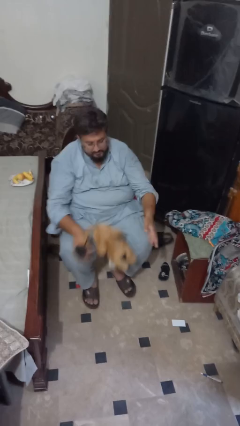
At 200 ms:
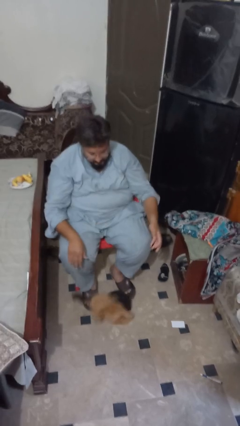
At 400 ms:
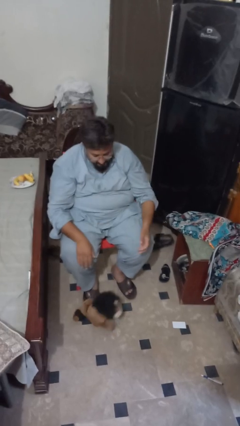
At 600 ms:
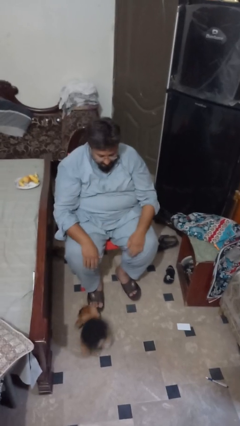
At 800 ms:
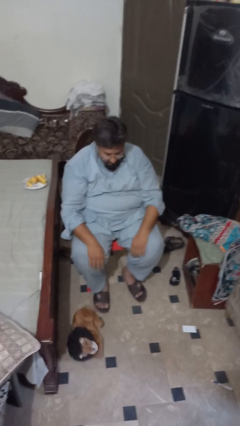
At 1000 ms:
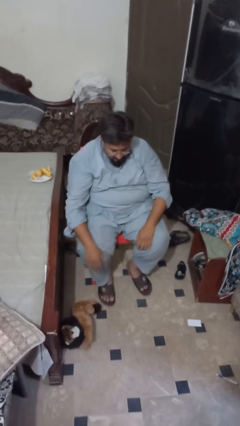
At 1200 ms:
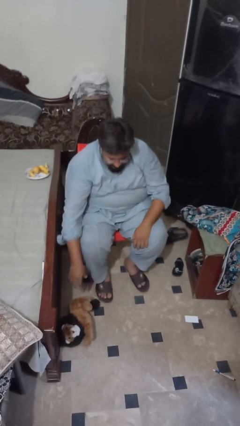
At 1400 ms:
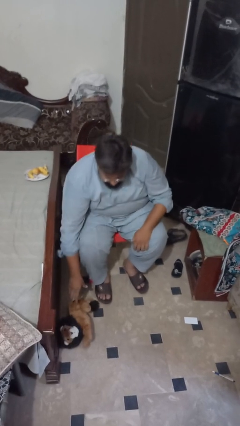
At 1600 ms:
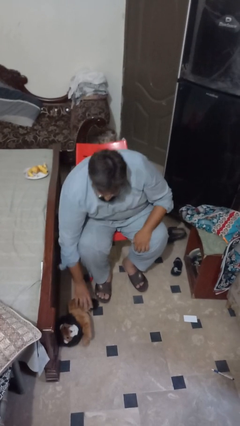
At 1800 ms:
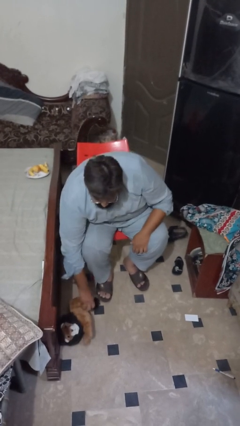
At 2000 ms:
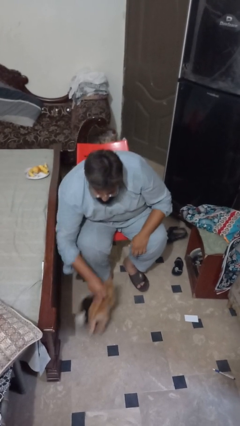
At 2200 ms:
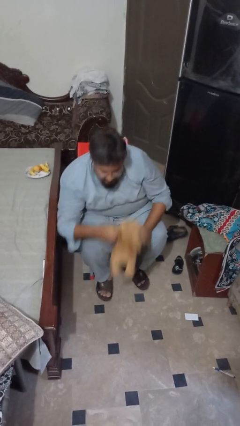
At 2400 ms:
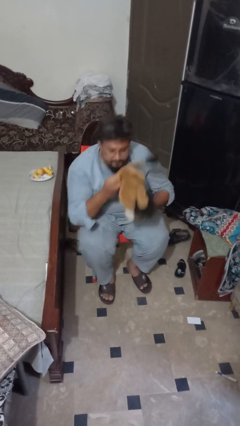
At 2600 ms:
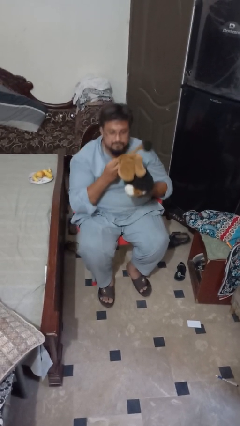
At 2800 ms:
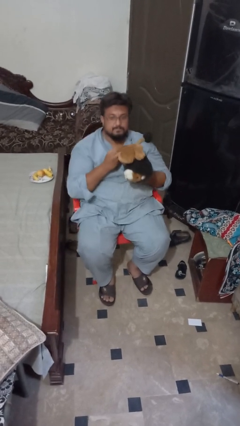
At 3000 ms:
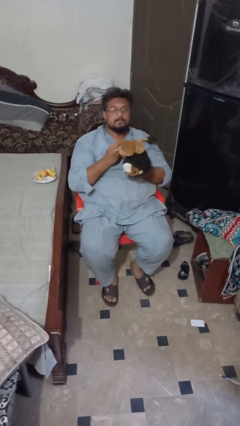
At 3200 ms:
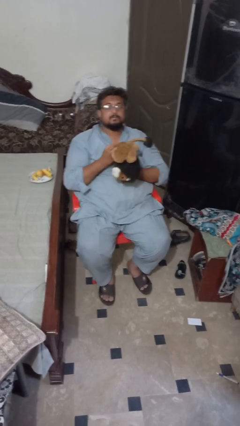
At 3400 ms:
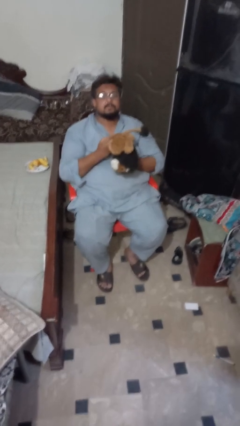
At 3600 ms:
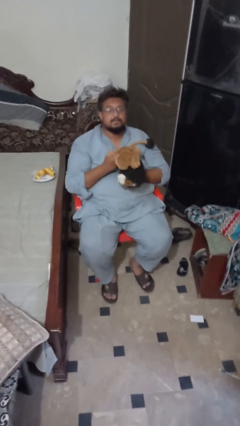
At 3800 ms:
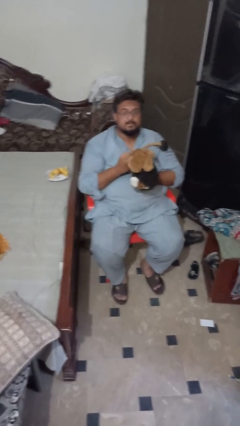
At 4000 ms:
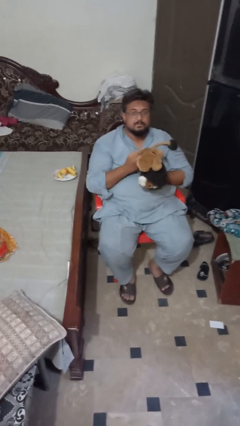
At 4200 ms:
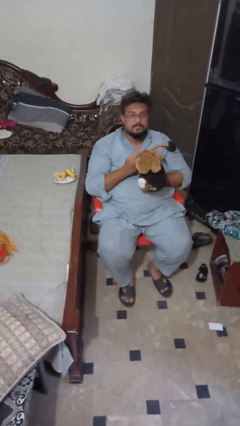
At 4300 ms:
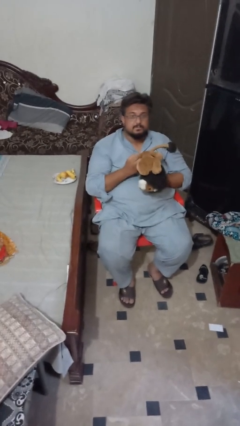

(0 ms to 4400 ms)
person picks up object from floor

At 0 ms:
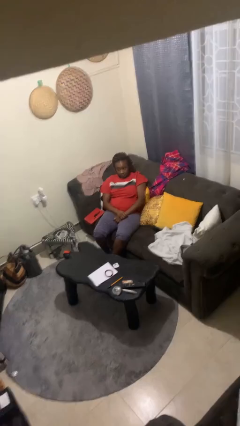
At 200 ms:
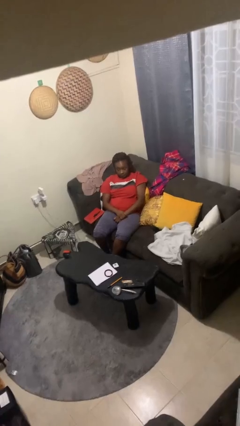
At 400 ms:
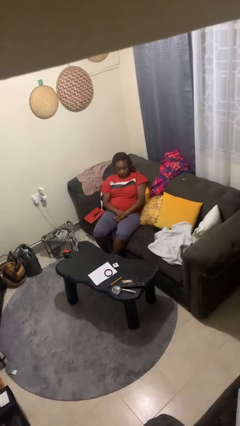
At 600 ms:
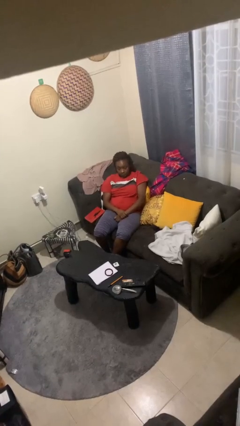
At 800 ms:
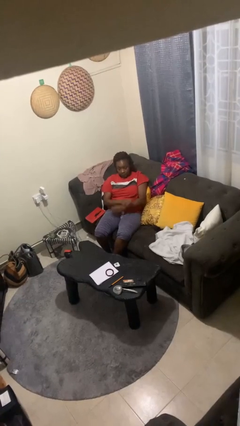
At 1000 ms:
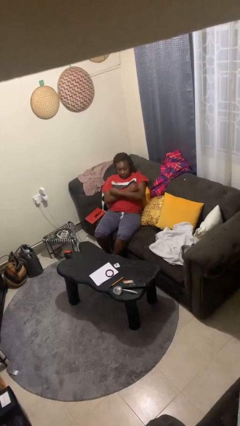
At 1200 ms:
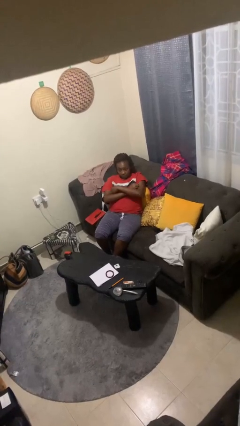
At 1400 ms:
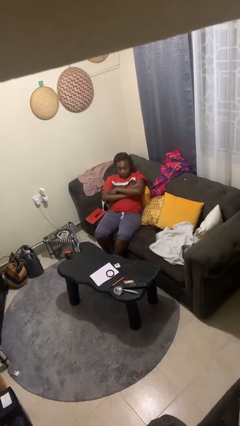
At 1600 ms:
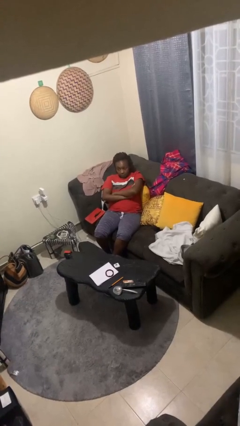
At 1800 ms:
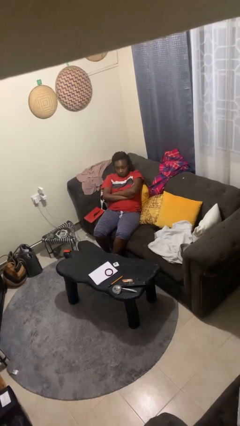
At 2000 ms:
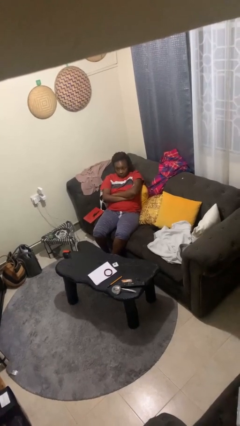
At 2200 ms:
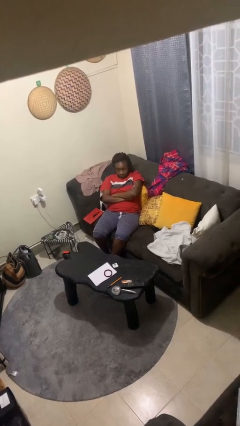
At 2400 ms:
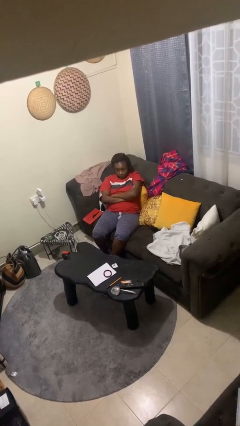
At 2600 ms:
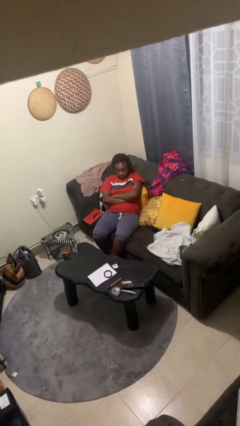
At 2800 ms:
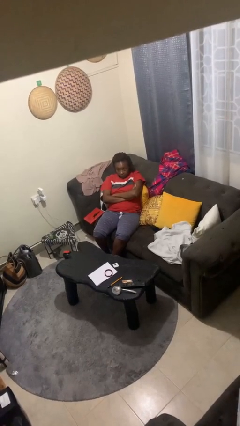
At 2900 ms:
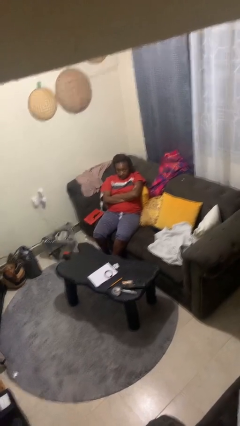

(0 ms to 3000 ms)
person crosses arms

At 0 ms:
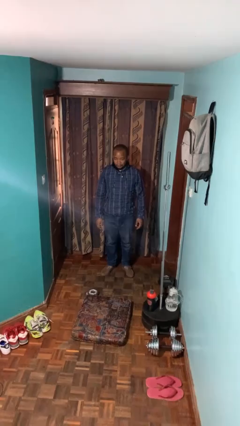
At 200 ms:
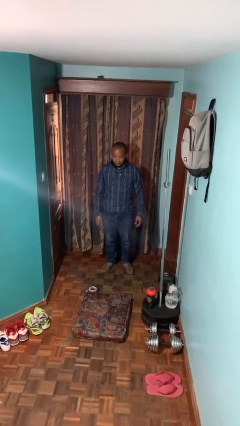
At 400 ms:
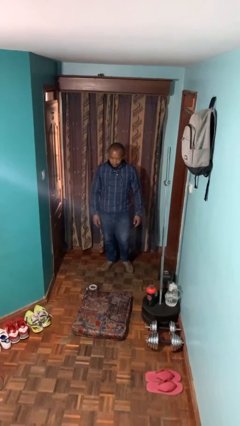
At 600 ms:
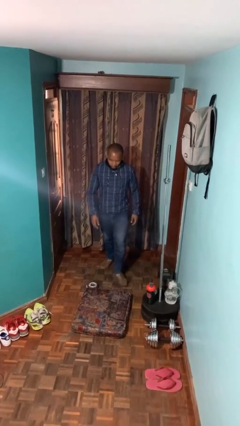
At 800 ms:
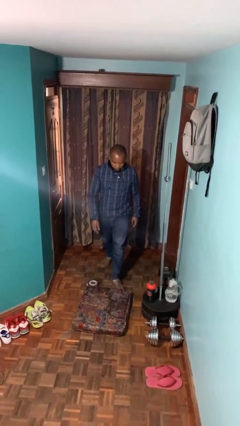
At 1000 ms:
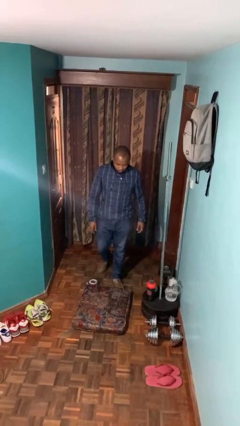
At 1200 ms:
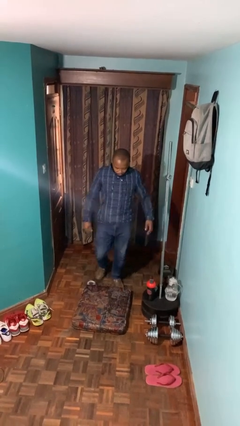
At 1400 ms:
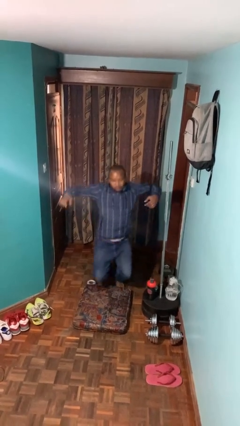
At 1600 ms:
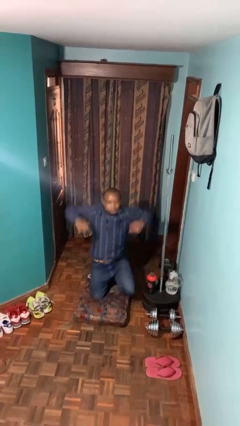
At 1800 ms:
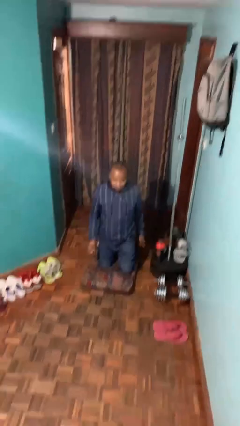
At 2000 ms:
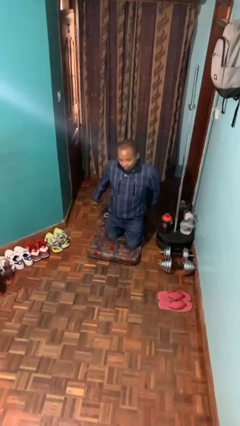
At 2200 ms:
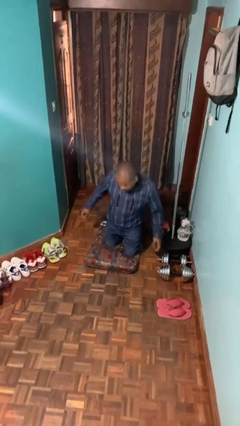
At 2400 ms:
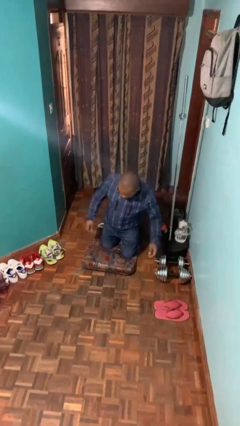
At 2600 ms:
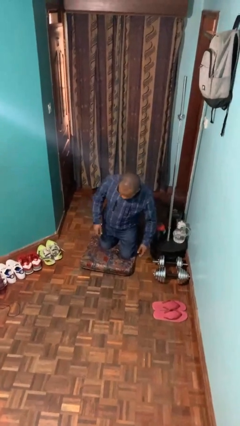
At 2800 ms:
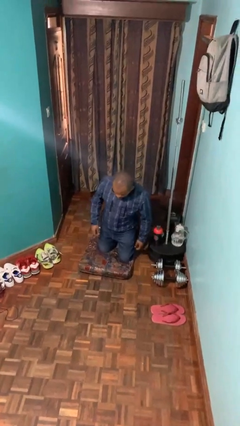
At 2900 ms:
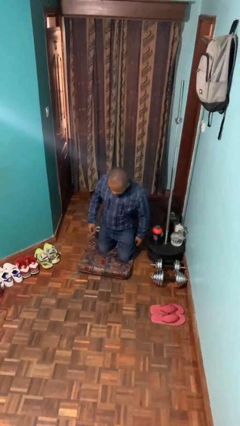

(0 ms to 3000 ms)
person trips on object on floor

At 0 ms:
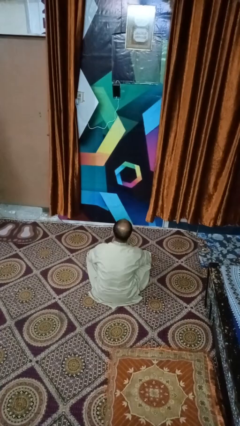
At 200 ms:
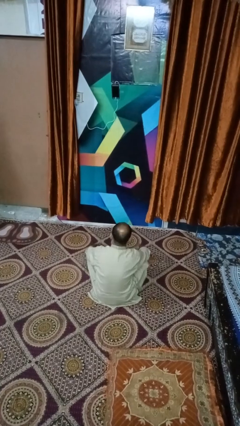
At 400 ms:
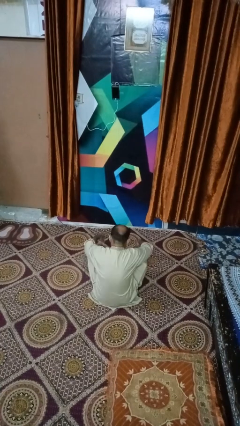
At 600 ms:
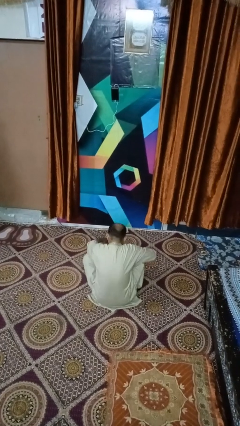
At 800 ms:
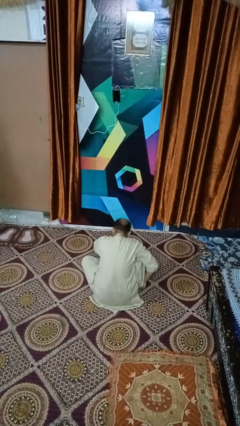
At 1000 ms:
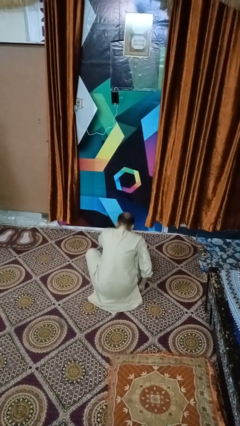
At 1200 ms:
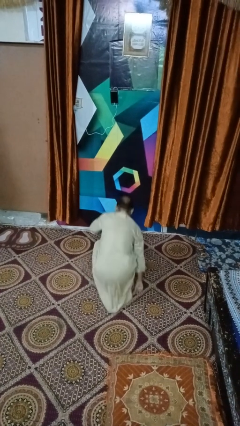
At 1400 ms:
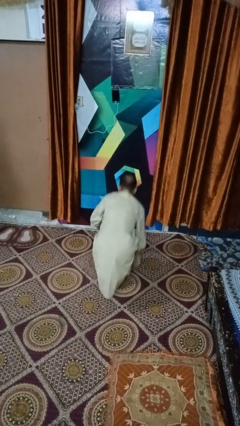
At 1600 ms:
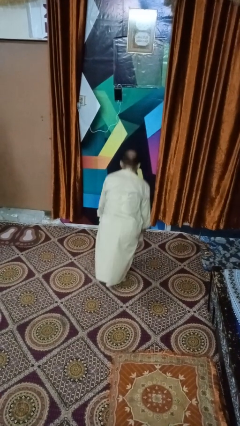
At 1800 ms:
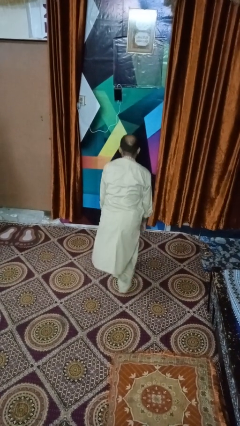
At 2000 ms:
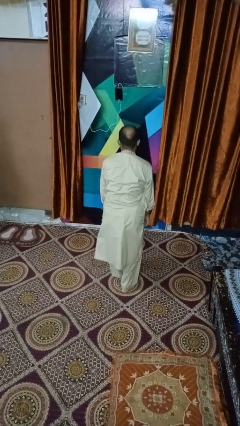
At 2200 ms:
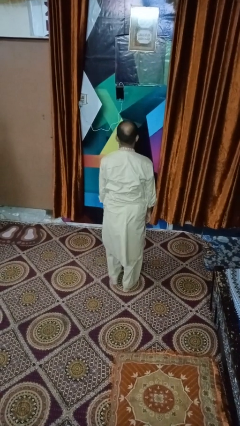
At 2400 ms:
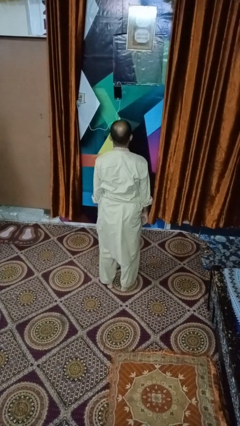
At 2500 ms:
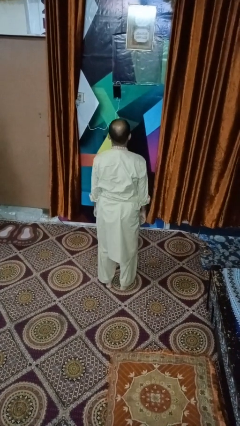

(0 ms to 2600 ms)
person stands up from floor

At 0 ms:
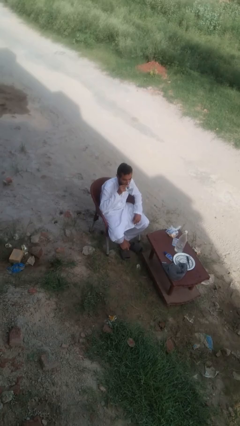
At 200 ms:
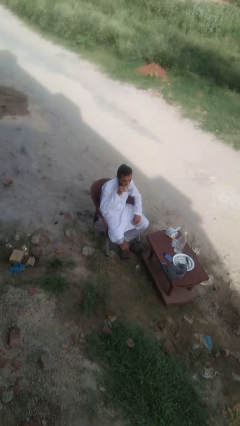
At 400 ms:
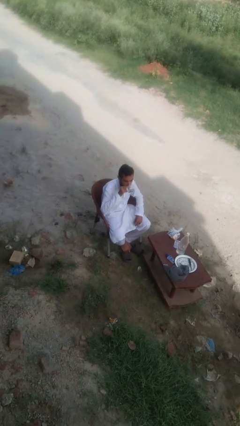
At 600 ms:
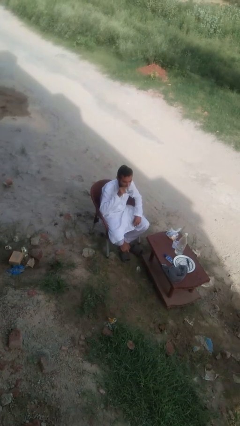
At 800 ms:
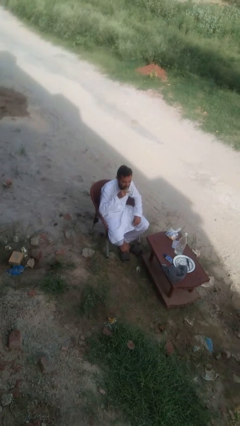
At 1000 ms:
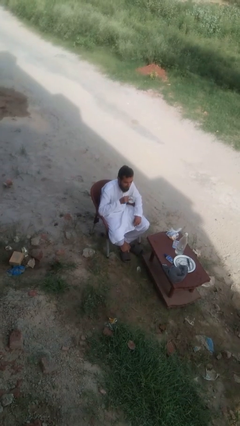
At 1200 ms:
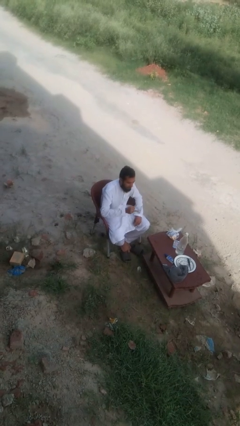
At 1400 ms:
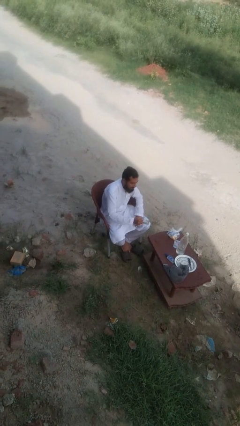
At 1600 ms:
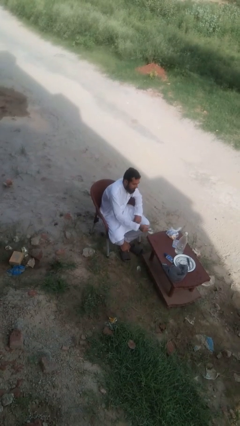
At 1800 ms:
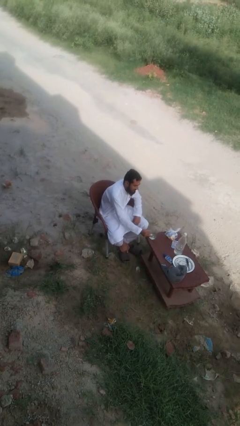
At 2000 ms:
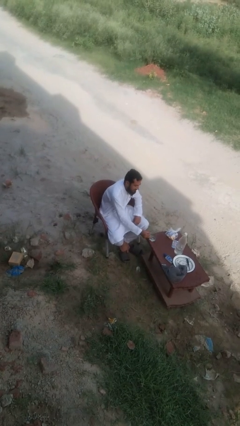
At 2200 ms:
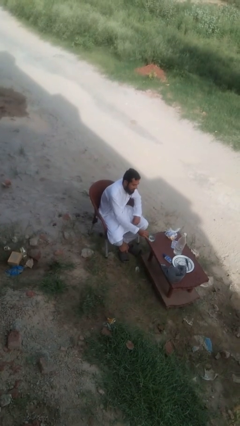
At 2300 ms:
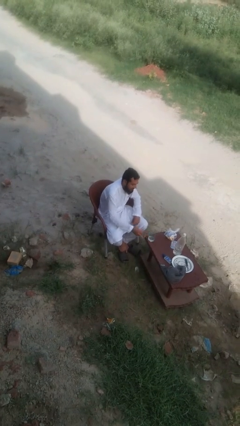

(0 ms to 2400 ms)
person puts down object on table

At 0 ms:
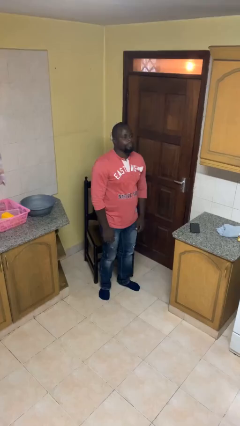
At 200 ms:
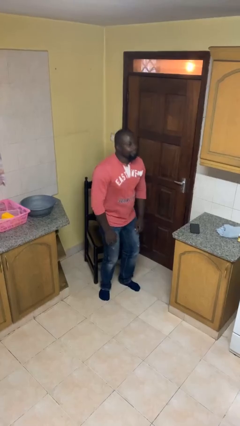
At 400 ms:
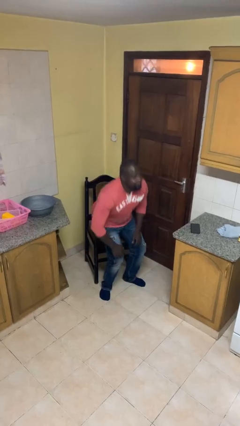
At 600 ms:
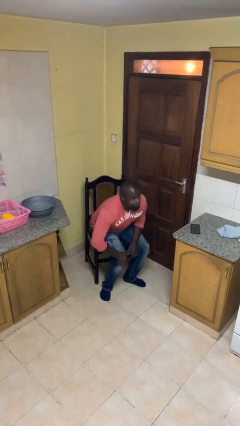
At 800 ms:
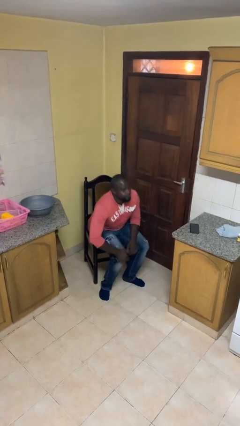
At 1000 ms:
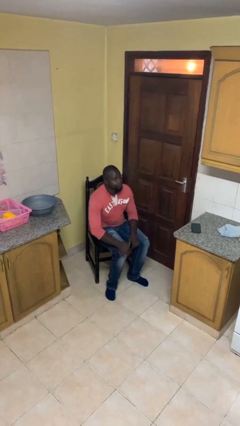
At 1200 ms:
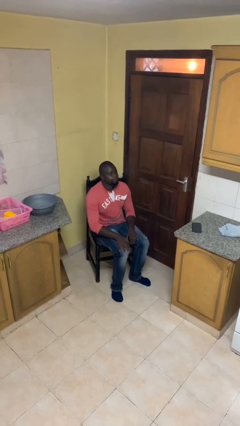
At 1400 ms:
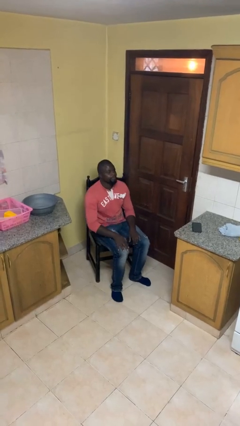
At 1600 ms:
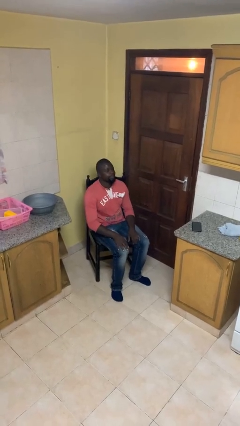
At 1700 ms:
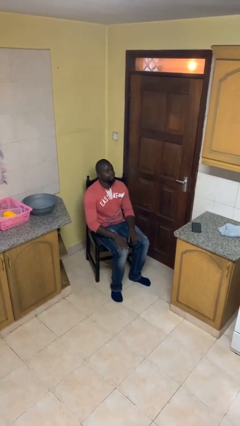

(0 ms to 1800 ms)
person sits down

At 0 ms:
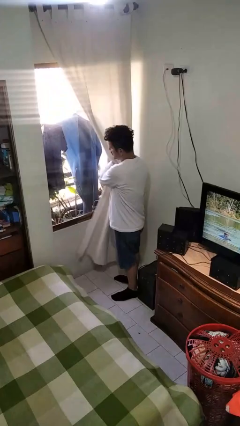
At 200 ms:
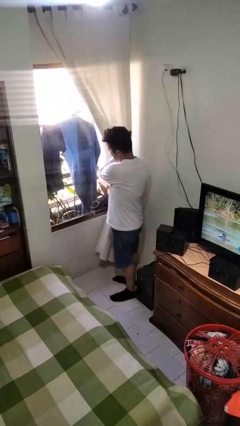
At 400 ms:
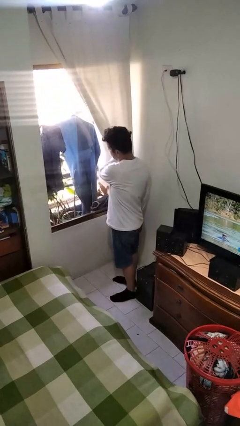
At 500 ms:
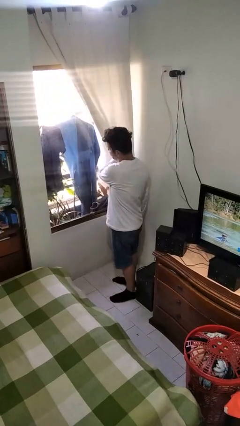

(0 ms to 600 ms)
person opens curtains
